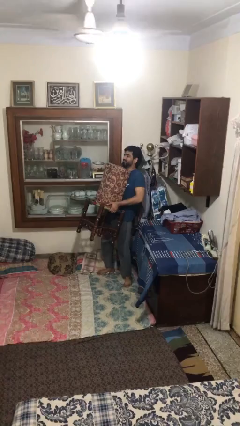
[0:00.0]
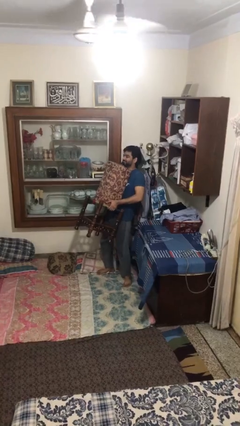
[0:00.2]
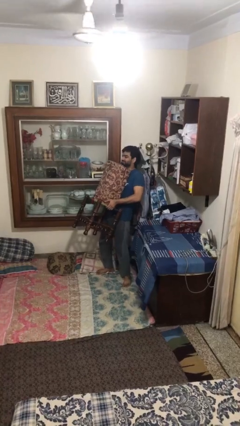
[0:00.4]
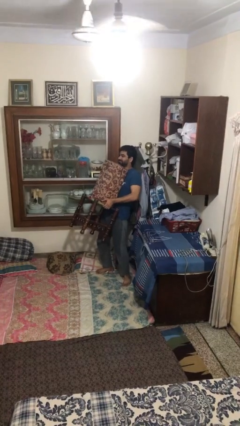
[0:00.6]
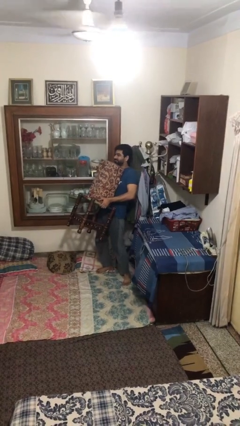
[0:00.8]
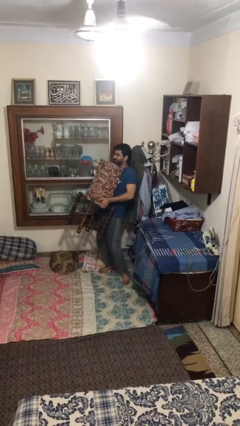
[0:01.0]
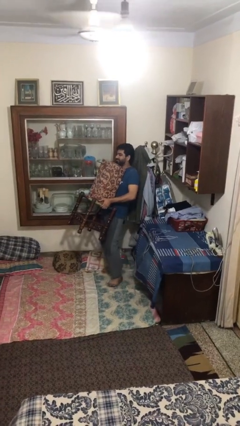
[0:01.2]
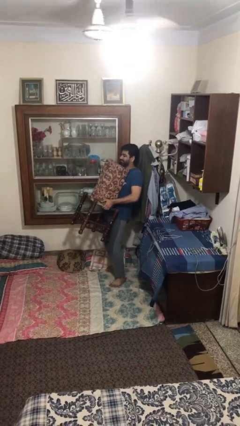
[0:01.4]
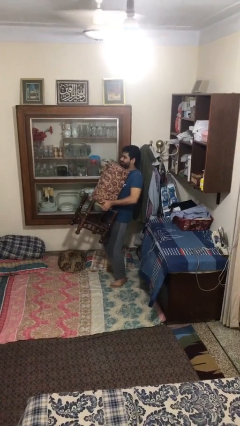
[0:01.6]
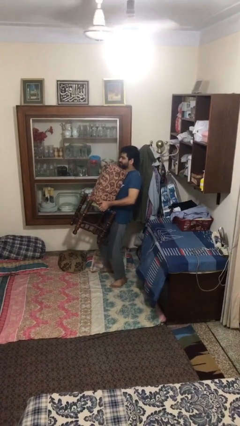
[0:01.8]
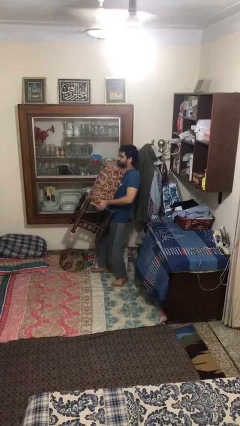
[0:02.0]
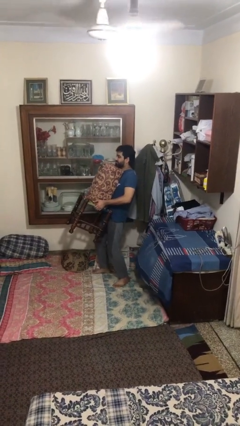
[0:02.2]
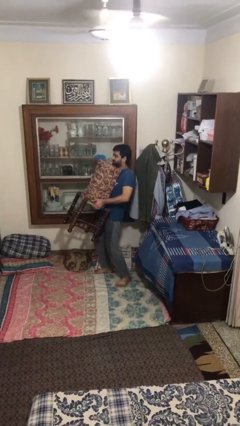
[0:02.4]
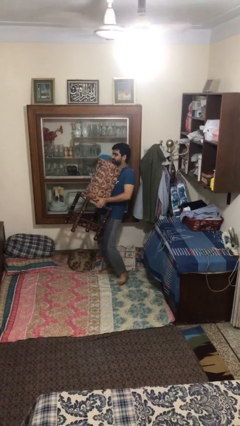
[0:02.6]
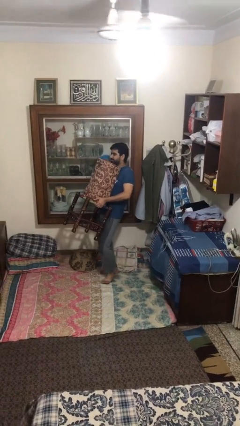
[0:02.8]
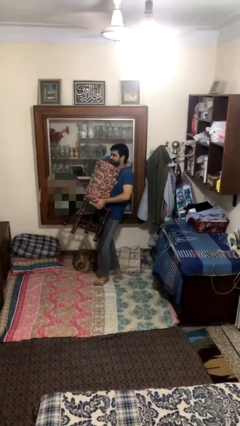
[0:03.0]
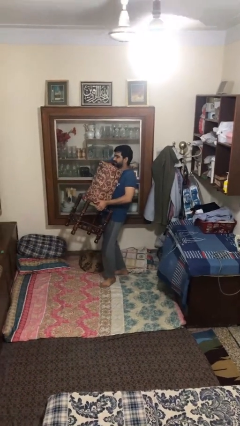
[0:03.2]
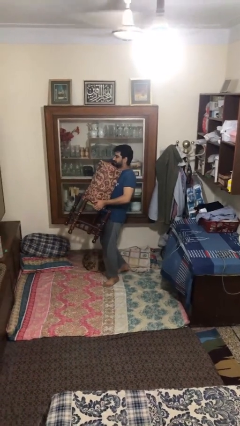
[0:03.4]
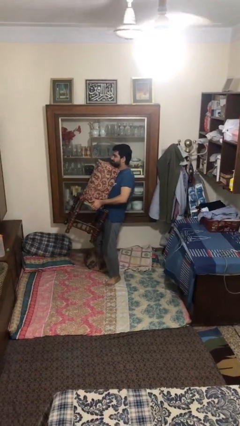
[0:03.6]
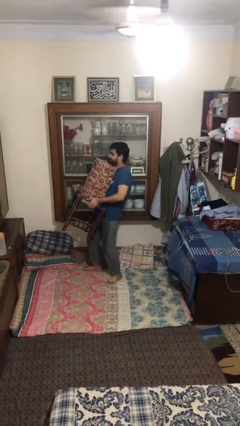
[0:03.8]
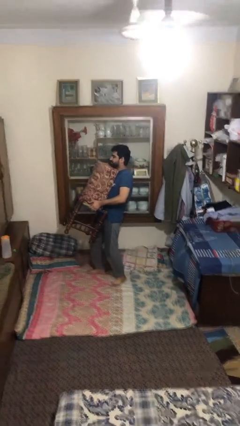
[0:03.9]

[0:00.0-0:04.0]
person carries heavy object

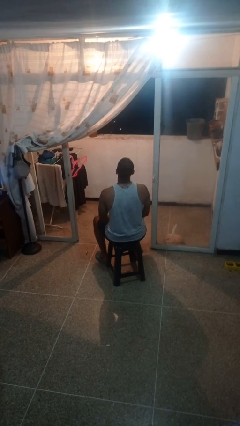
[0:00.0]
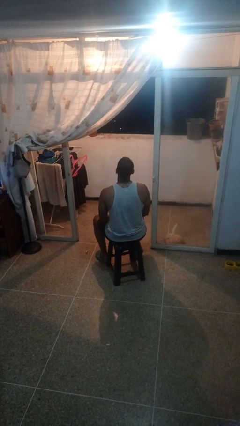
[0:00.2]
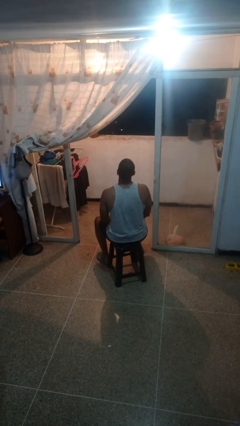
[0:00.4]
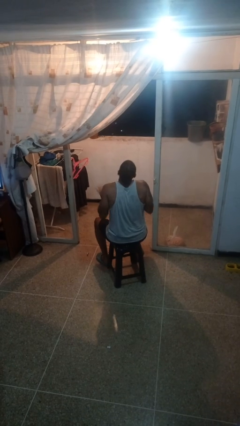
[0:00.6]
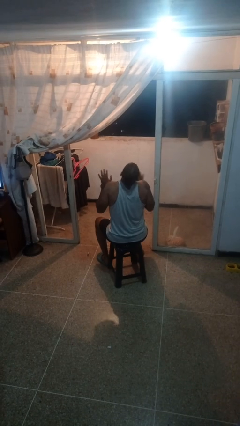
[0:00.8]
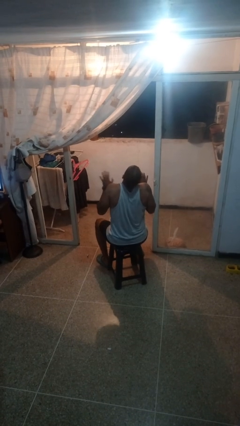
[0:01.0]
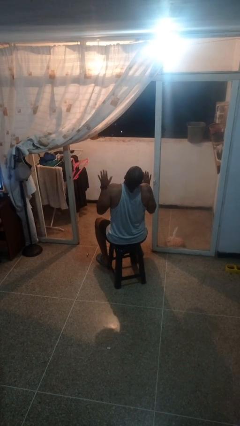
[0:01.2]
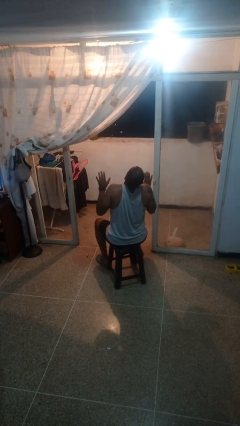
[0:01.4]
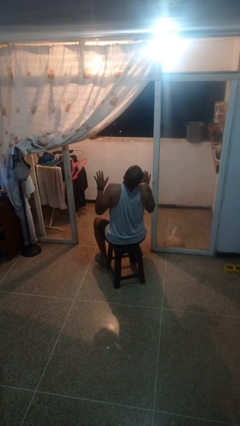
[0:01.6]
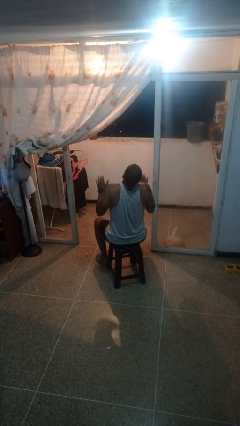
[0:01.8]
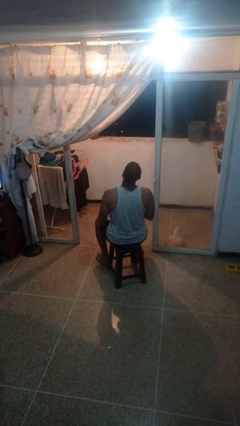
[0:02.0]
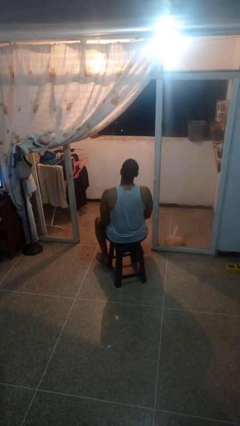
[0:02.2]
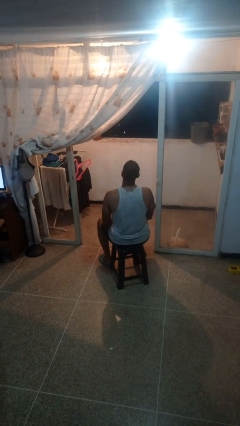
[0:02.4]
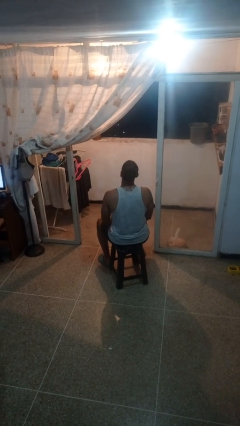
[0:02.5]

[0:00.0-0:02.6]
person shrugs

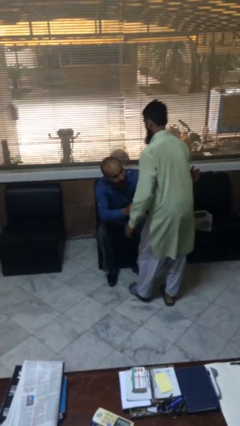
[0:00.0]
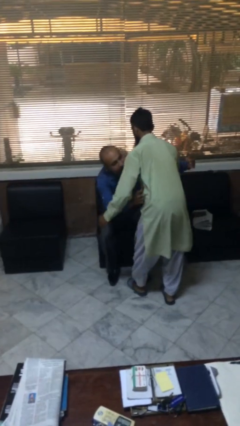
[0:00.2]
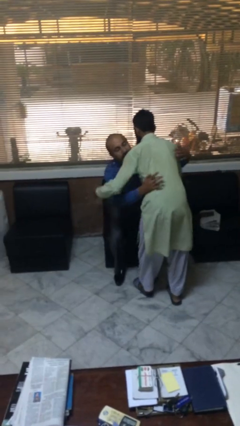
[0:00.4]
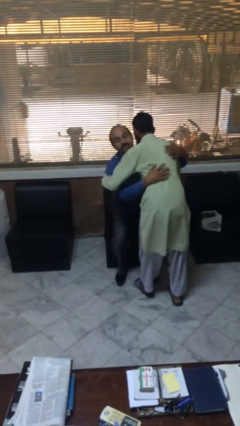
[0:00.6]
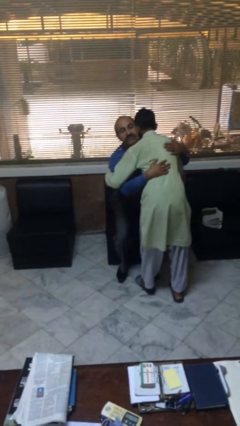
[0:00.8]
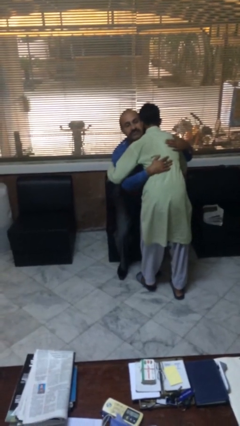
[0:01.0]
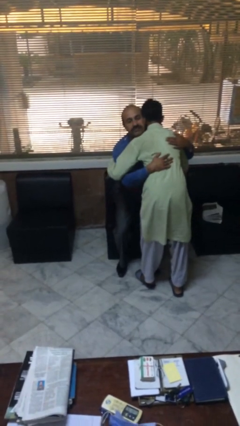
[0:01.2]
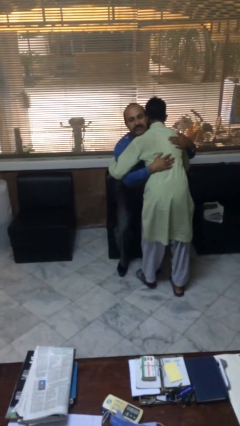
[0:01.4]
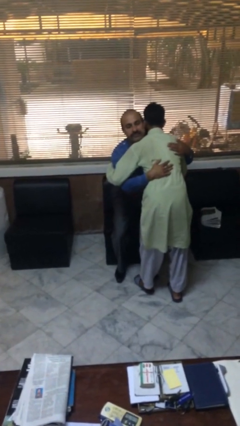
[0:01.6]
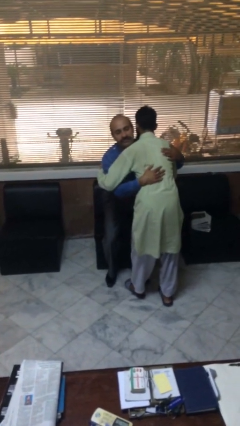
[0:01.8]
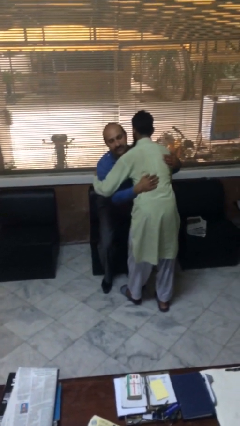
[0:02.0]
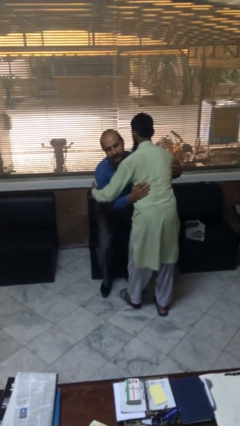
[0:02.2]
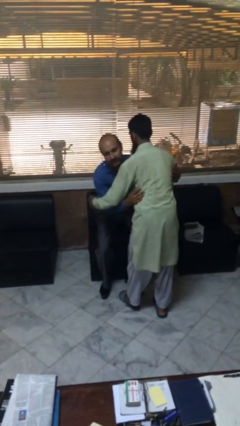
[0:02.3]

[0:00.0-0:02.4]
person embraces person

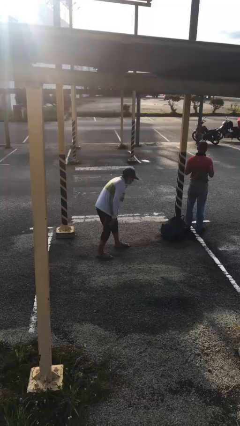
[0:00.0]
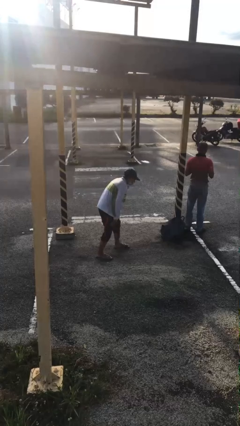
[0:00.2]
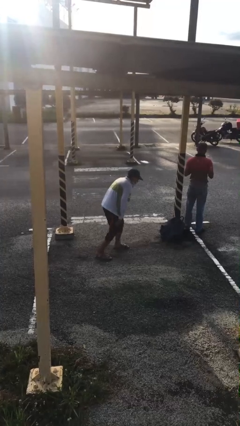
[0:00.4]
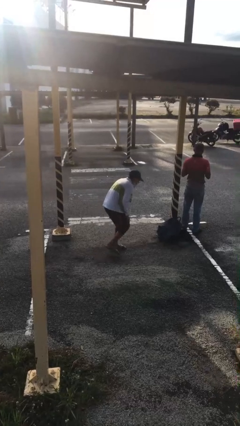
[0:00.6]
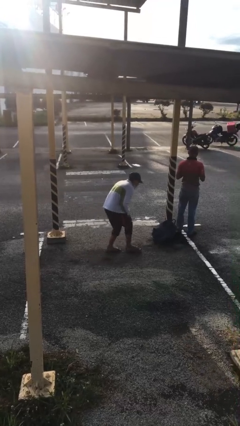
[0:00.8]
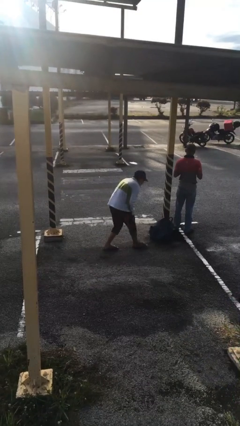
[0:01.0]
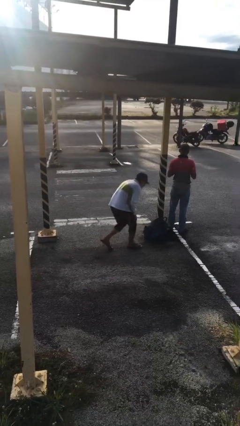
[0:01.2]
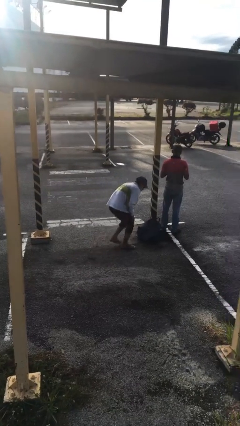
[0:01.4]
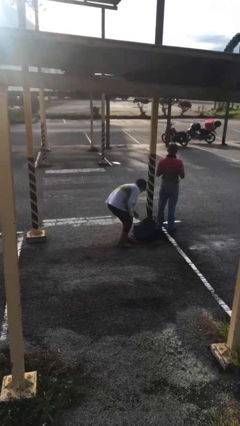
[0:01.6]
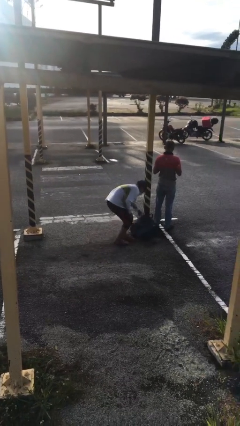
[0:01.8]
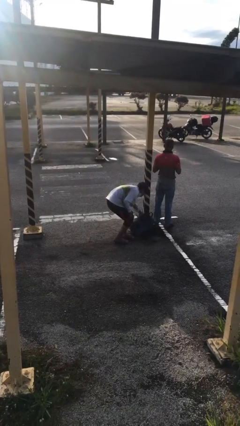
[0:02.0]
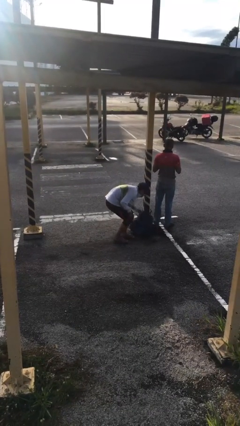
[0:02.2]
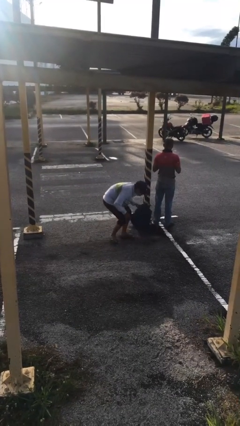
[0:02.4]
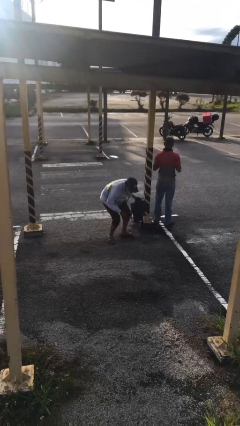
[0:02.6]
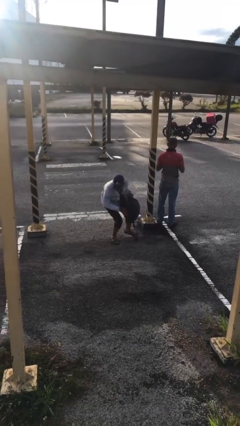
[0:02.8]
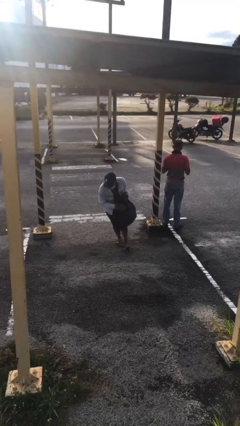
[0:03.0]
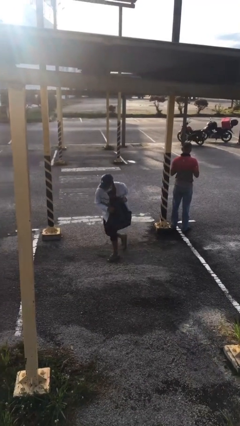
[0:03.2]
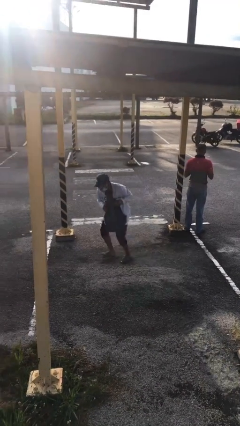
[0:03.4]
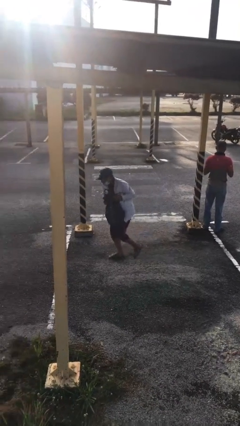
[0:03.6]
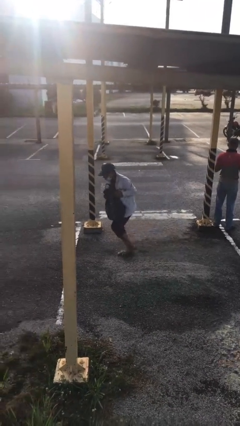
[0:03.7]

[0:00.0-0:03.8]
person steals object from person

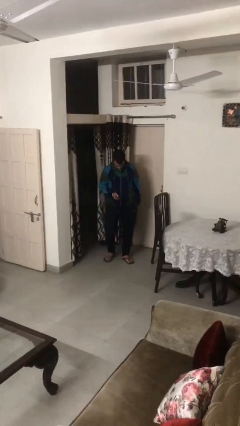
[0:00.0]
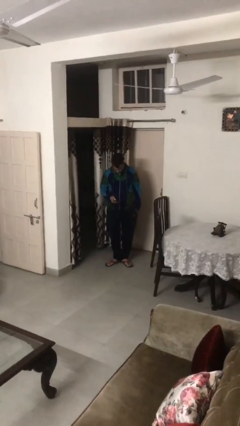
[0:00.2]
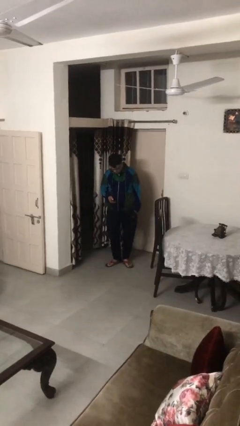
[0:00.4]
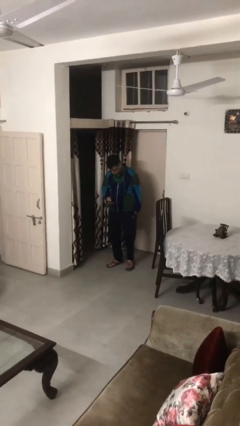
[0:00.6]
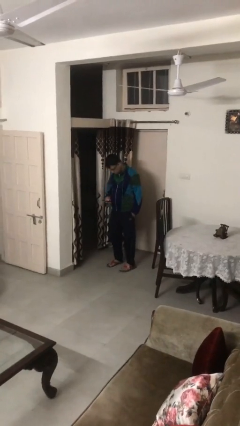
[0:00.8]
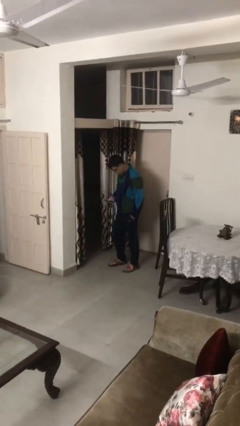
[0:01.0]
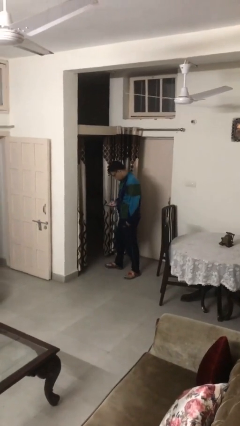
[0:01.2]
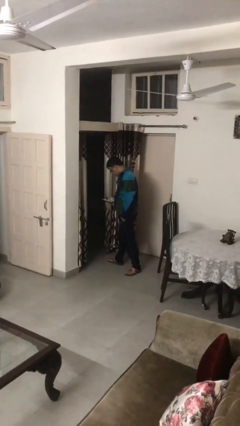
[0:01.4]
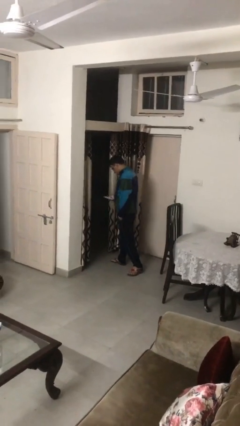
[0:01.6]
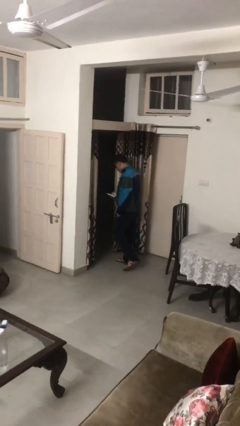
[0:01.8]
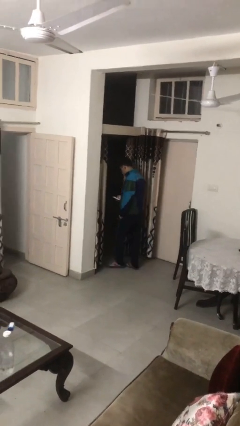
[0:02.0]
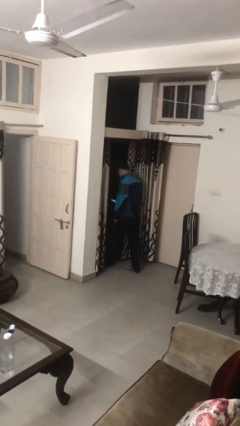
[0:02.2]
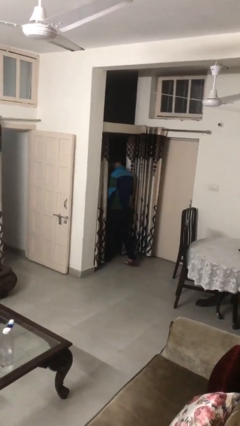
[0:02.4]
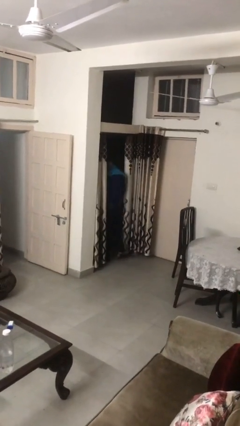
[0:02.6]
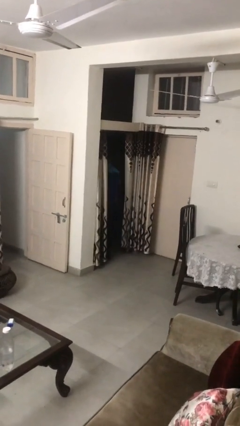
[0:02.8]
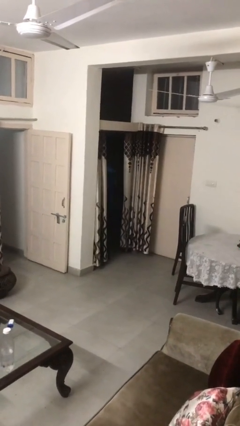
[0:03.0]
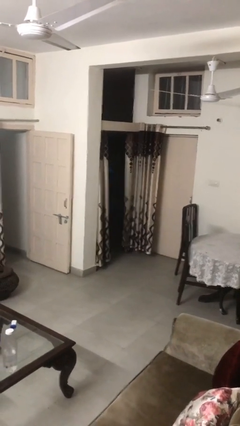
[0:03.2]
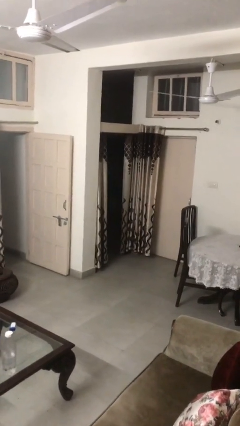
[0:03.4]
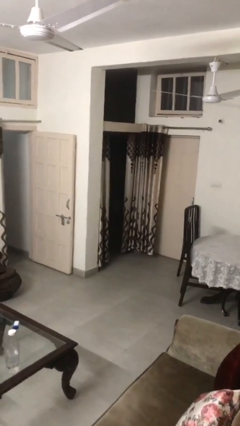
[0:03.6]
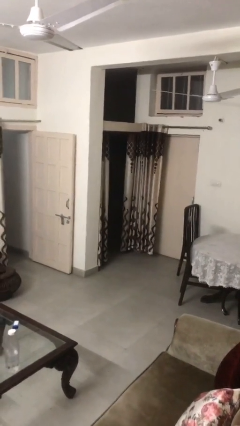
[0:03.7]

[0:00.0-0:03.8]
person exits scene through structure

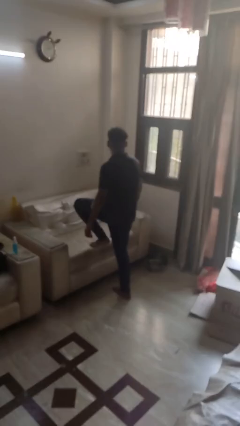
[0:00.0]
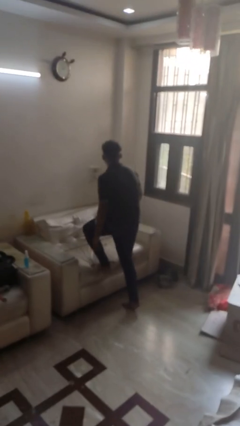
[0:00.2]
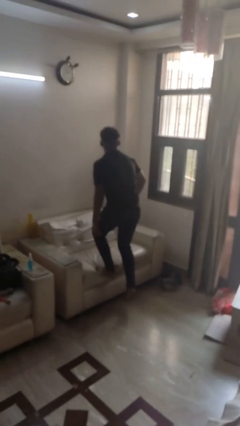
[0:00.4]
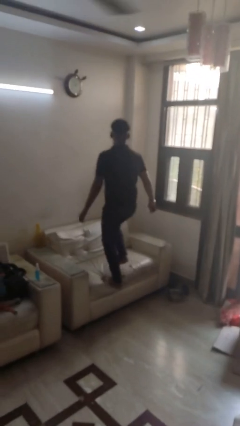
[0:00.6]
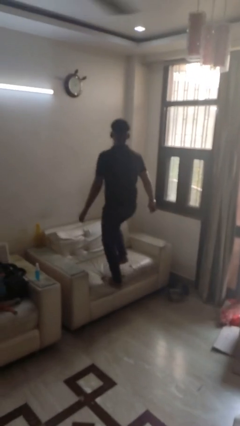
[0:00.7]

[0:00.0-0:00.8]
person climbs on couch

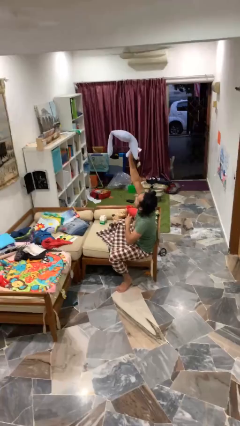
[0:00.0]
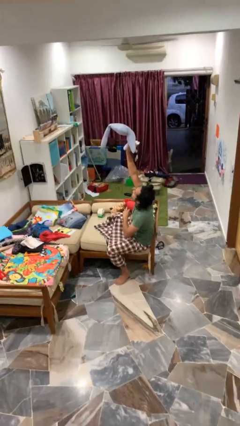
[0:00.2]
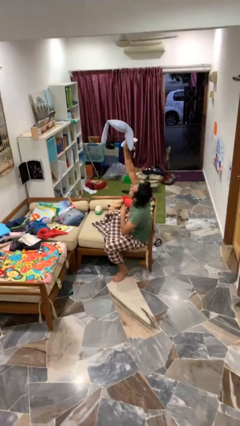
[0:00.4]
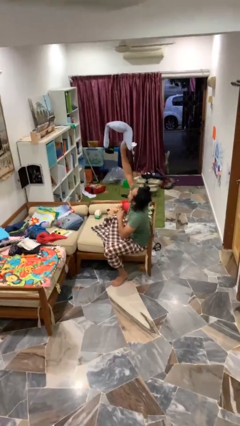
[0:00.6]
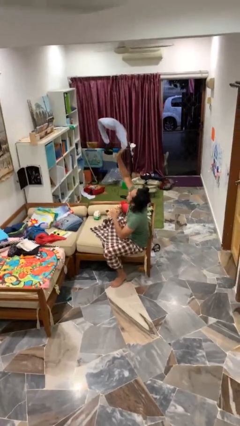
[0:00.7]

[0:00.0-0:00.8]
person drops object
